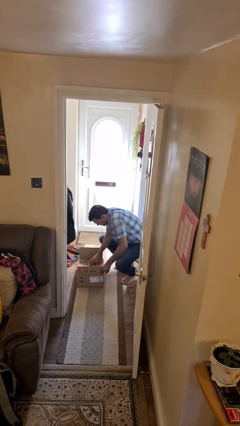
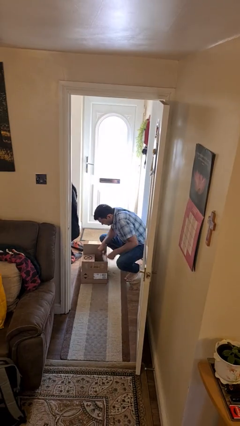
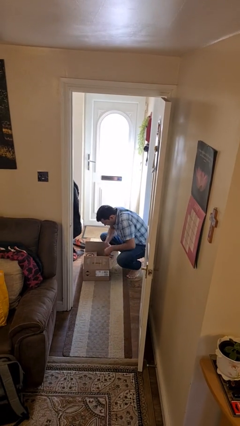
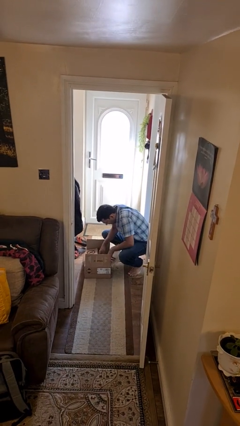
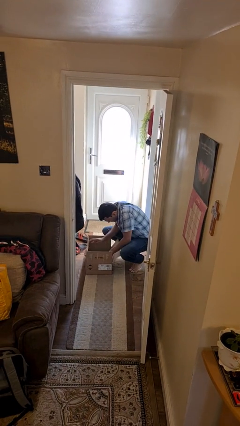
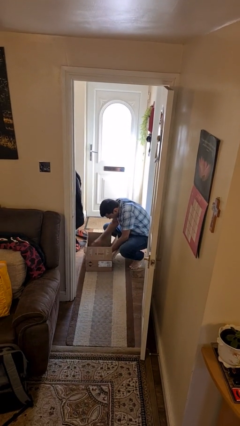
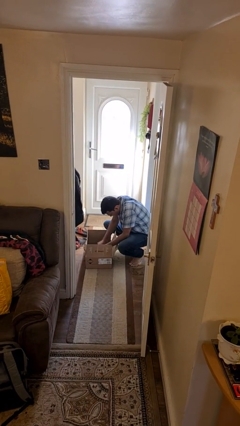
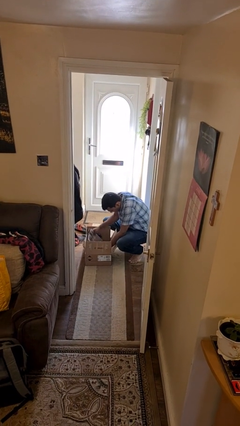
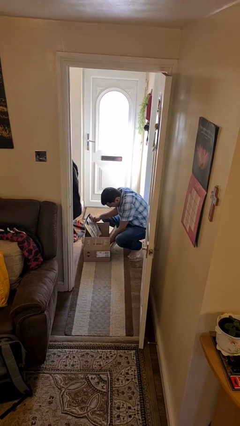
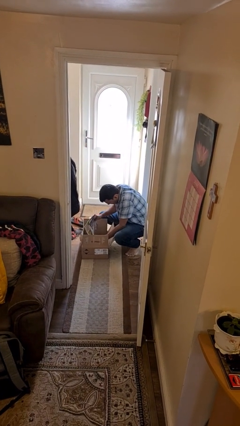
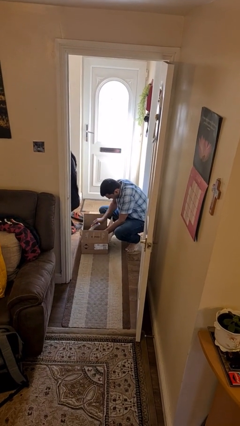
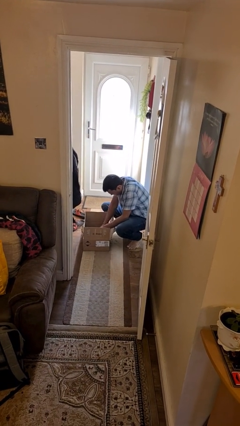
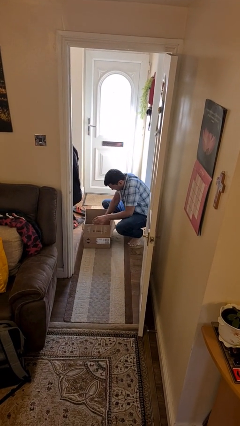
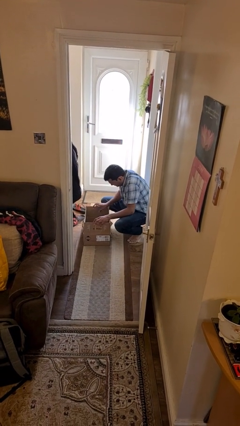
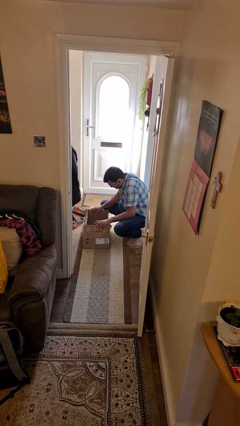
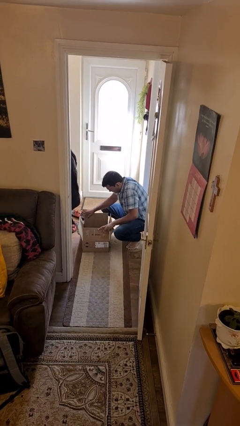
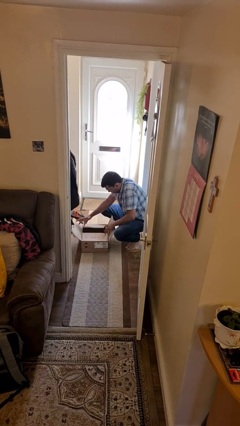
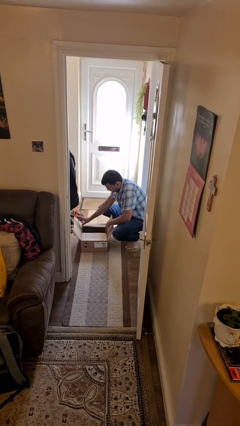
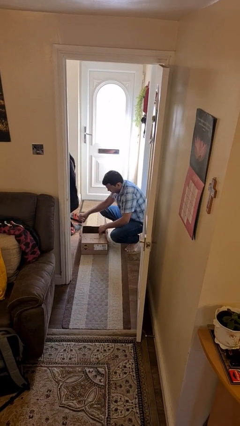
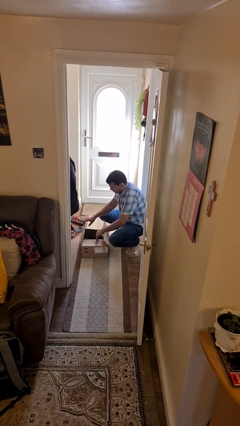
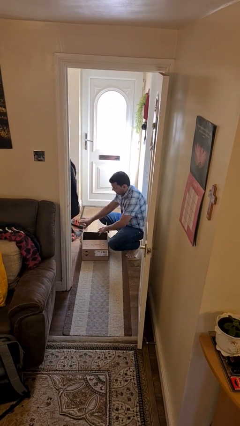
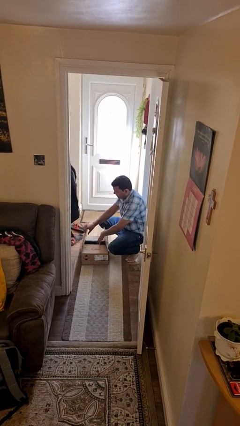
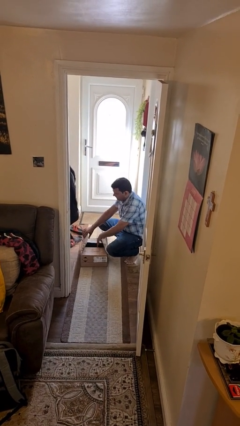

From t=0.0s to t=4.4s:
person searches in box

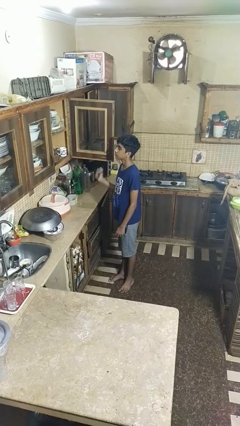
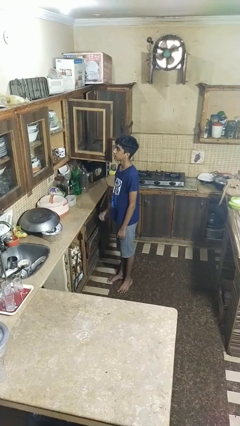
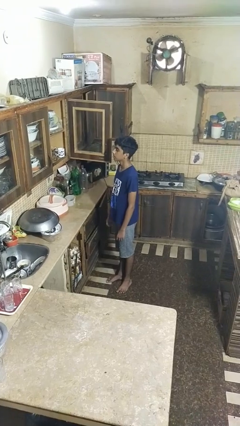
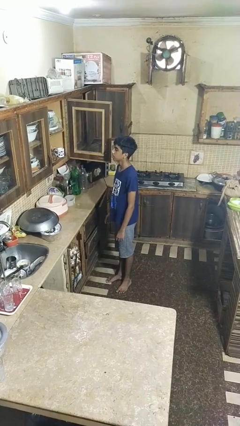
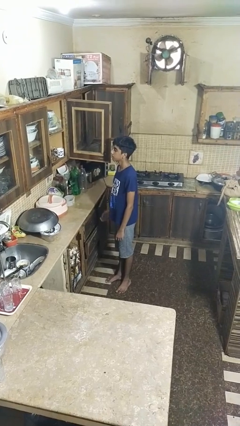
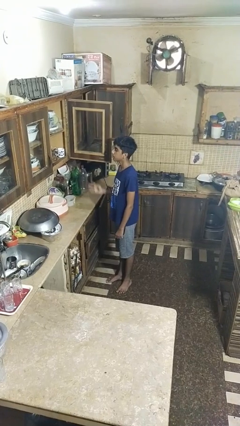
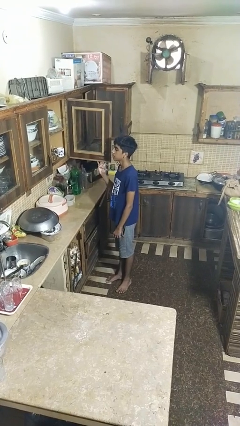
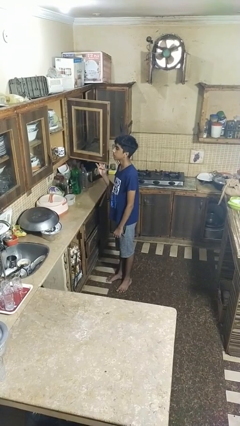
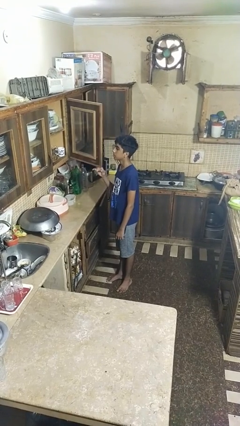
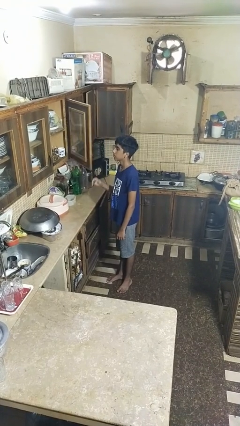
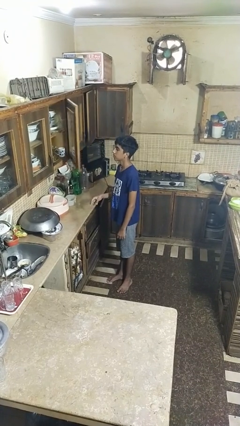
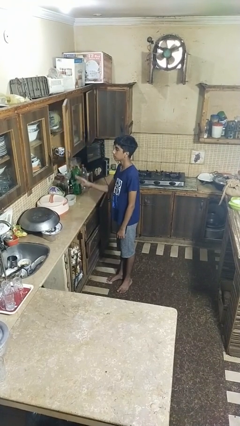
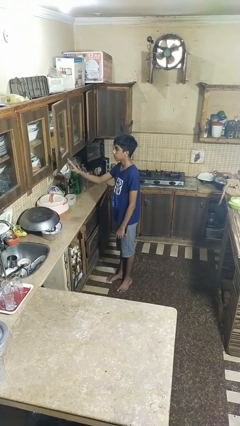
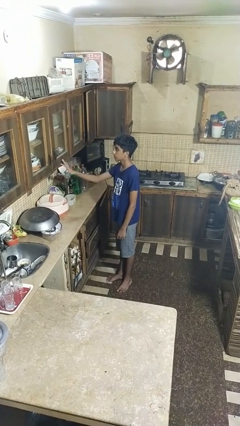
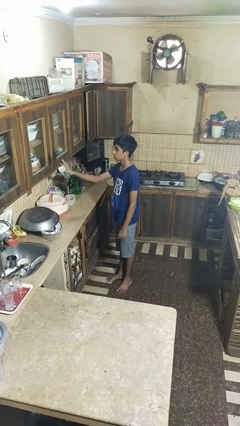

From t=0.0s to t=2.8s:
person closes cabinet

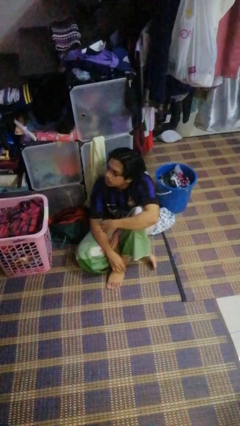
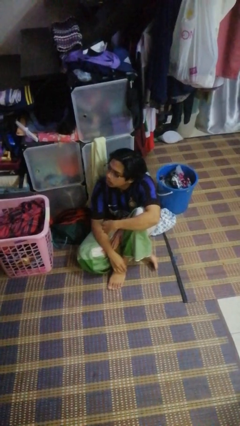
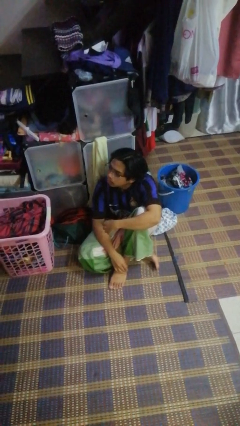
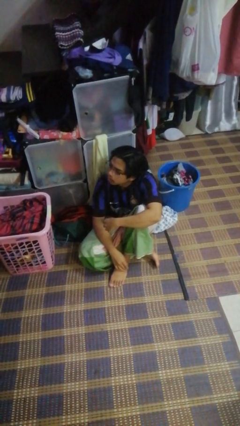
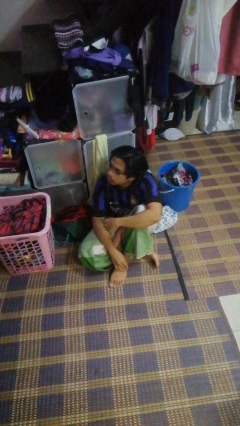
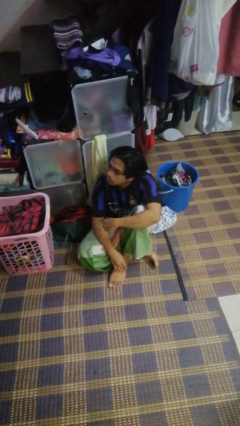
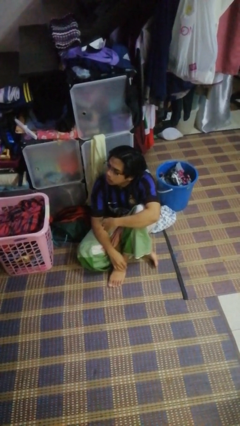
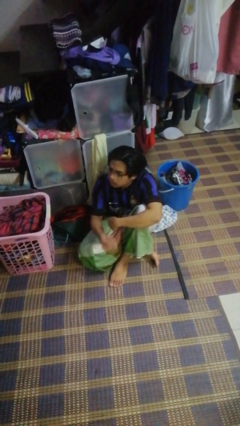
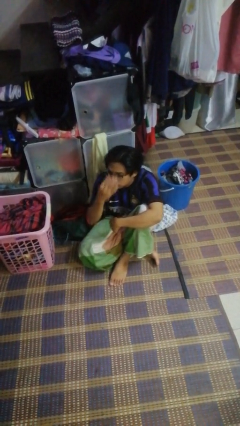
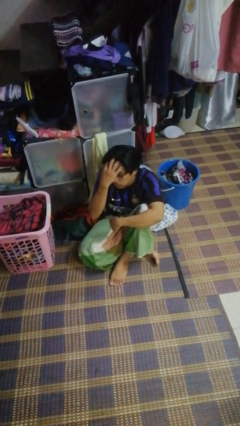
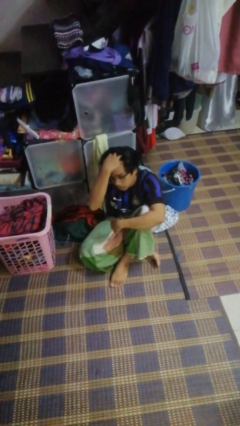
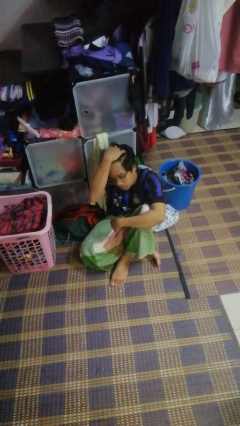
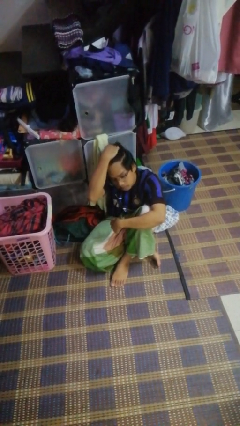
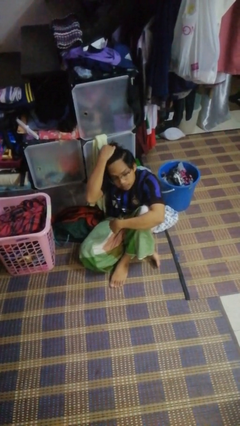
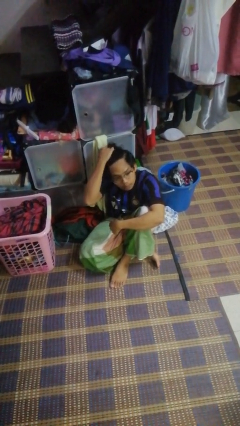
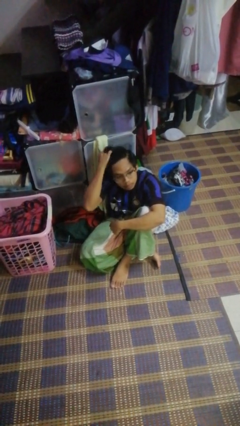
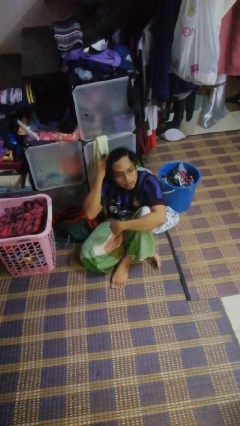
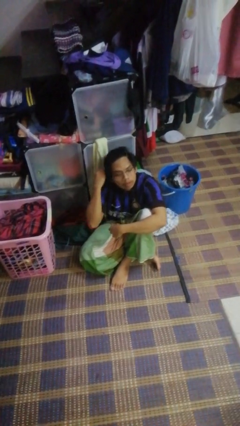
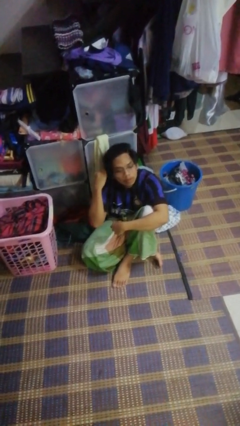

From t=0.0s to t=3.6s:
person strokes hair

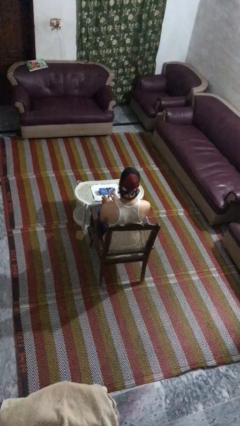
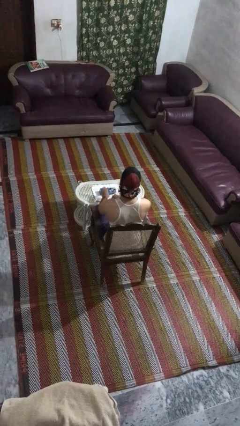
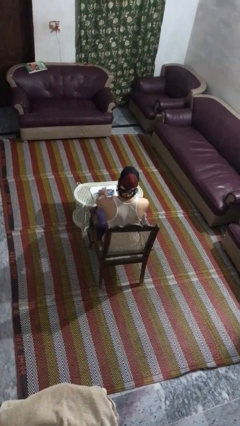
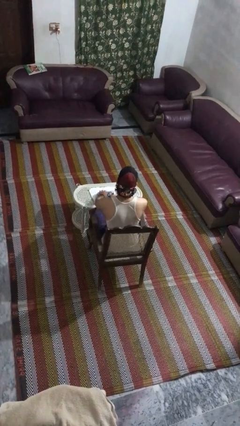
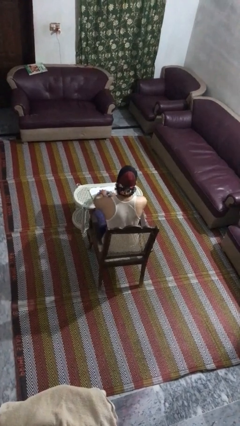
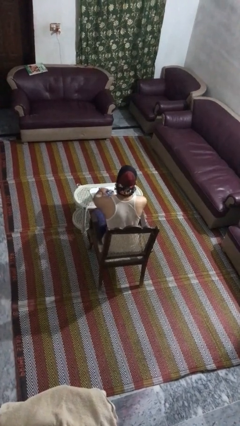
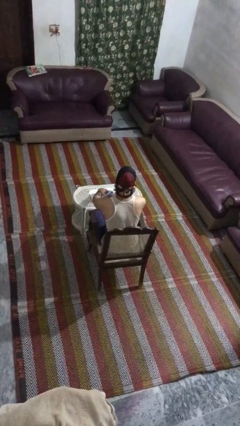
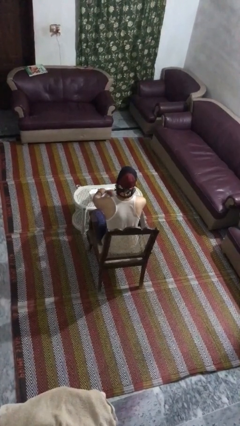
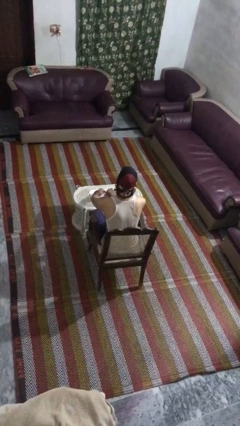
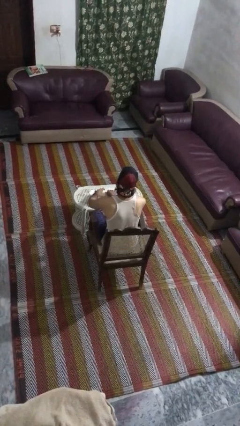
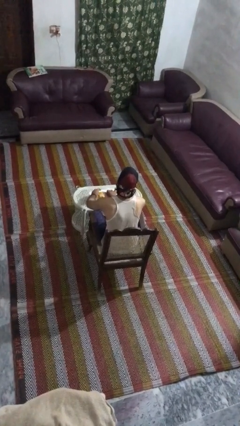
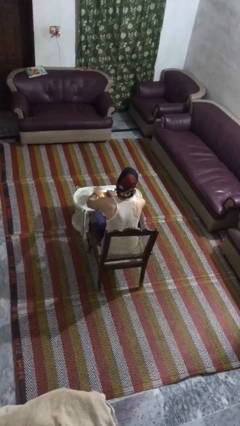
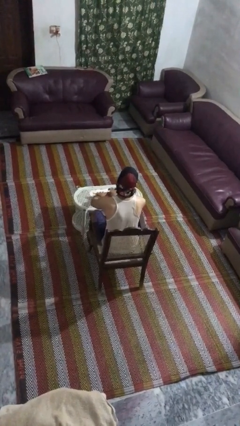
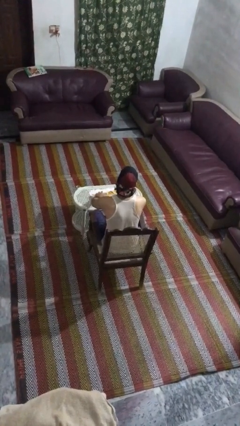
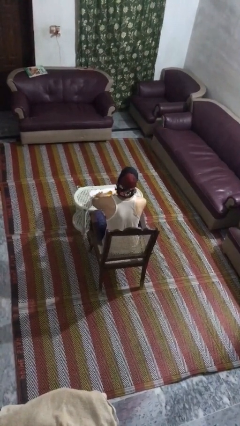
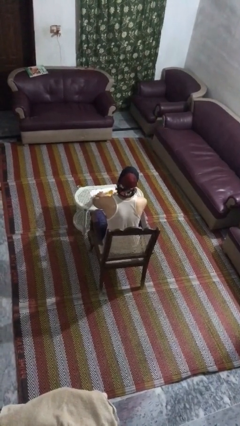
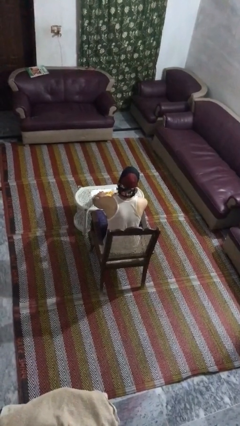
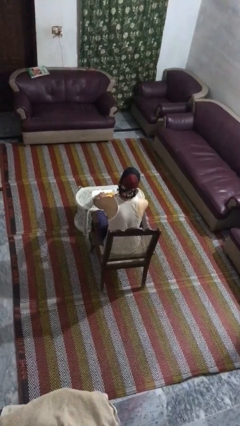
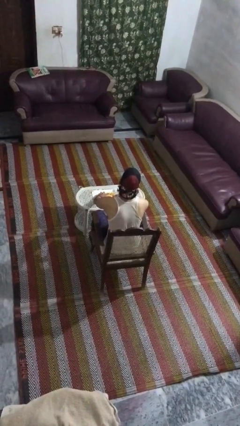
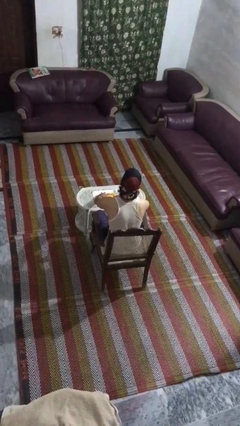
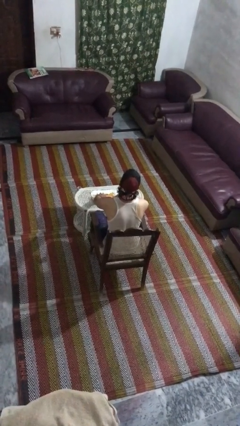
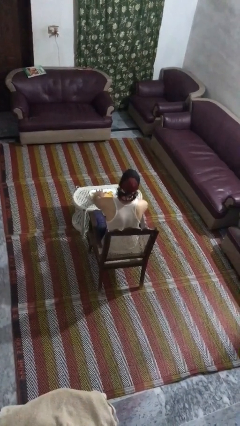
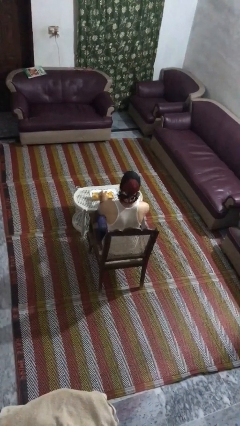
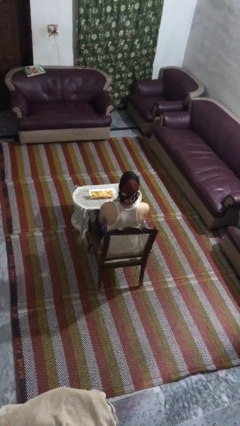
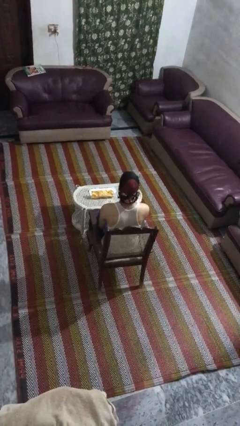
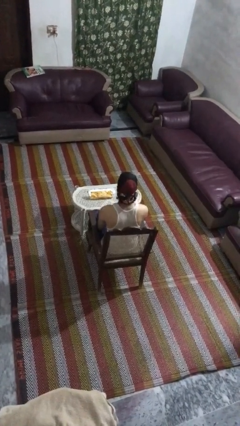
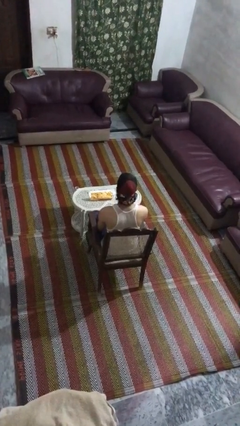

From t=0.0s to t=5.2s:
person wraps box

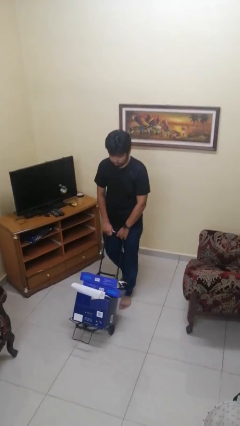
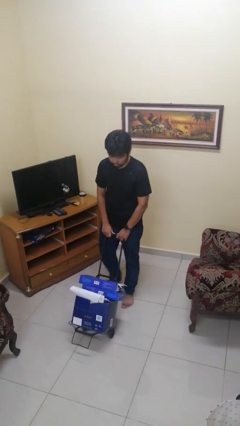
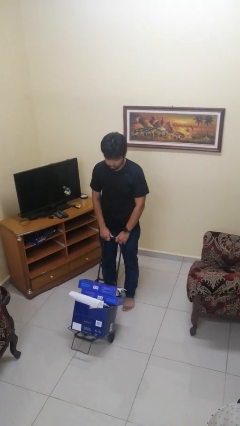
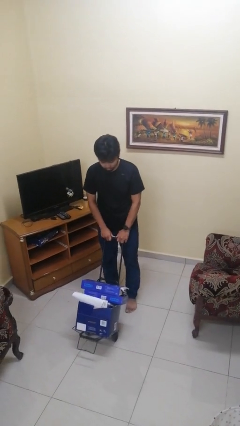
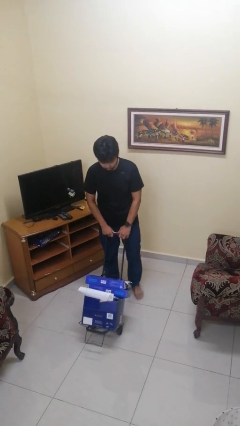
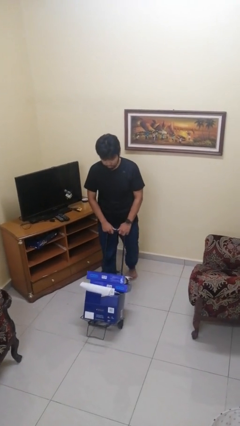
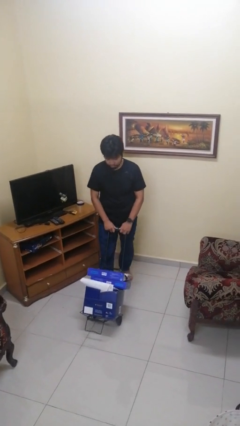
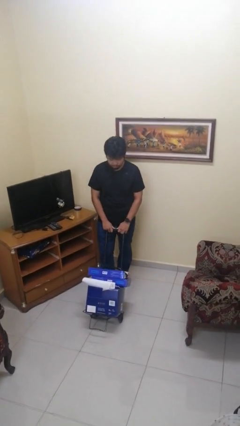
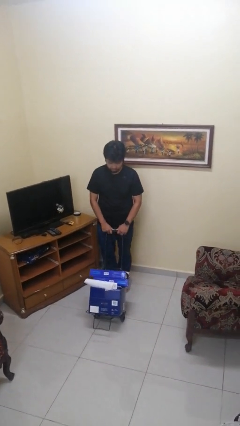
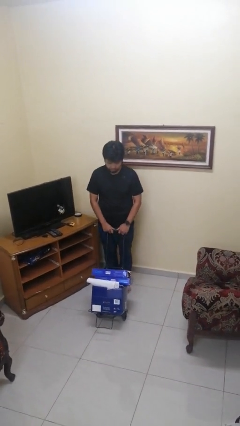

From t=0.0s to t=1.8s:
person pulls wheeled cart
